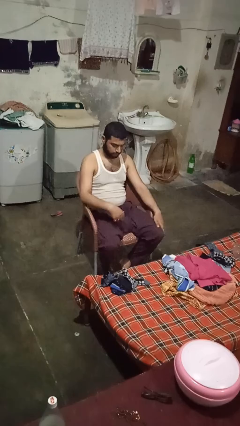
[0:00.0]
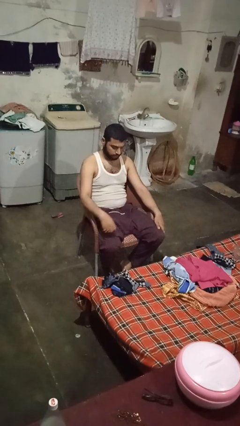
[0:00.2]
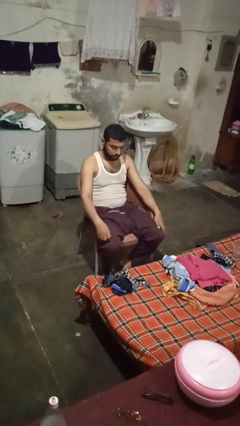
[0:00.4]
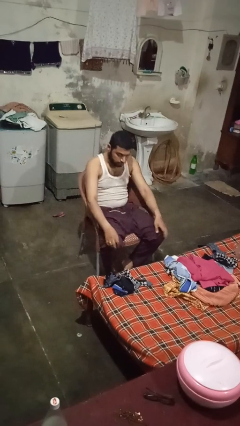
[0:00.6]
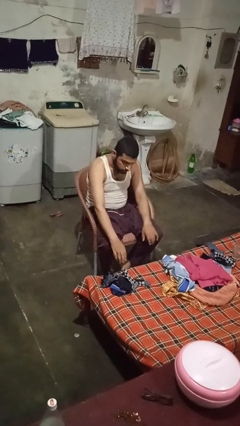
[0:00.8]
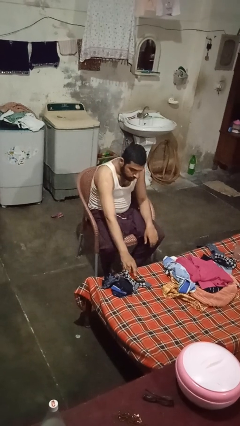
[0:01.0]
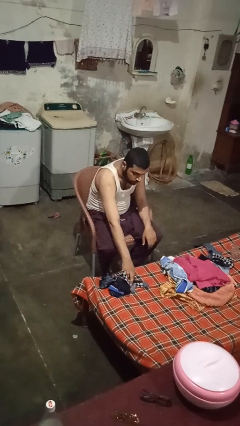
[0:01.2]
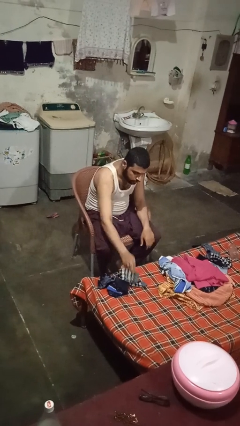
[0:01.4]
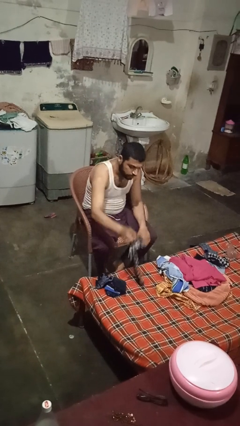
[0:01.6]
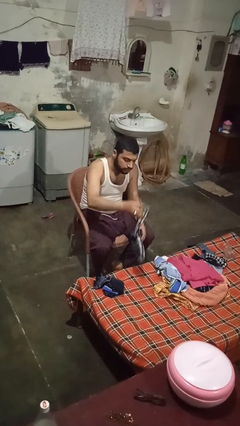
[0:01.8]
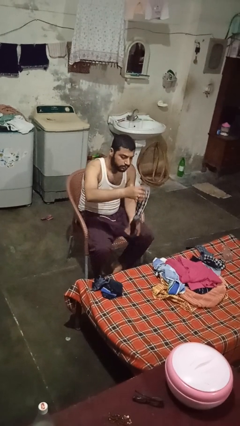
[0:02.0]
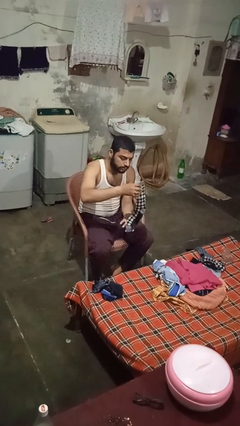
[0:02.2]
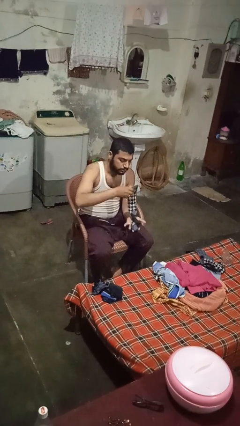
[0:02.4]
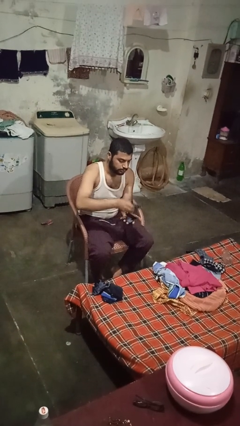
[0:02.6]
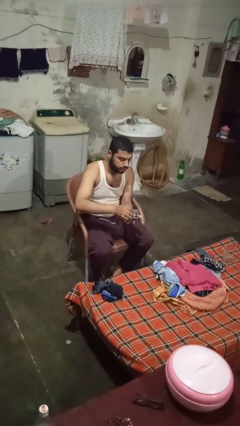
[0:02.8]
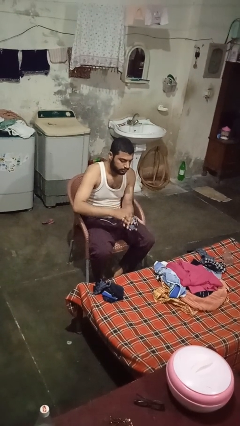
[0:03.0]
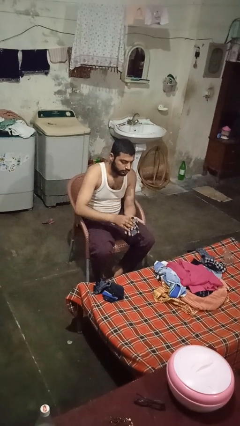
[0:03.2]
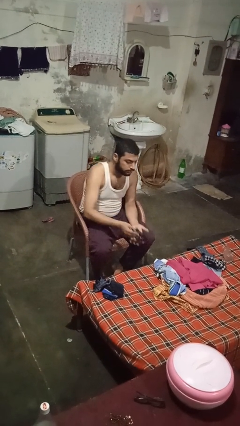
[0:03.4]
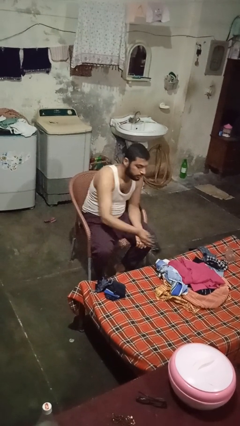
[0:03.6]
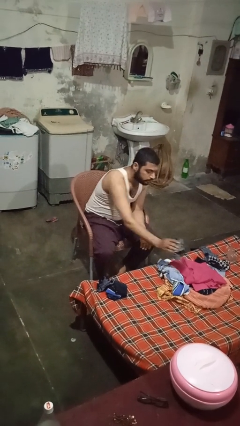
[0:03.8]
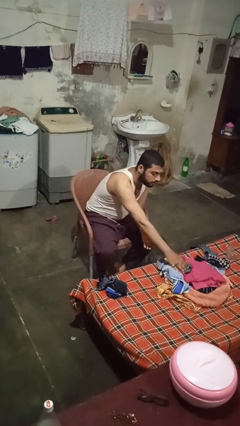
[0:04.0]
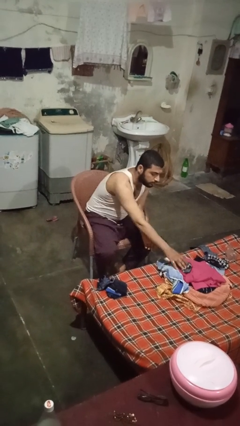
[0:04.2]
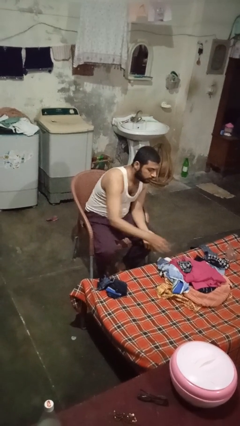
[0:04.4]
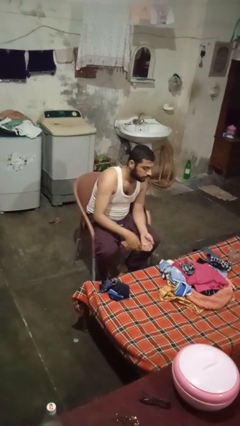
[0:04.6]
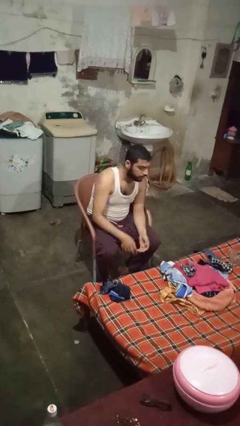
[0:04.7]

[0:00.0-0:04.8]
person folds socks

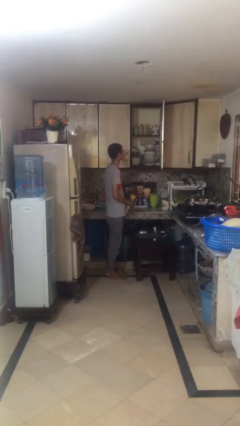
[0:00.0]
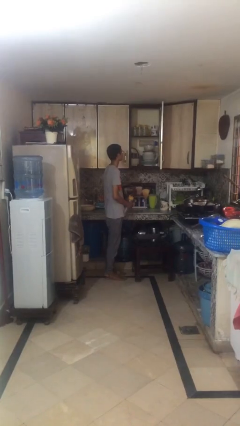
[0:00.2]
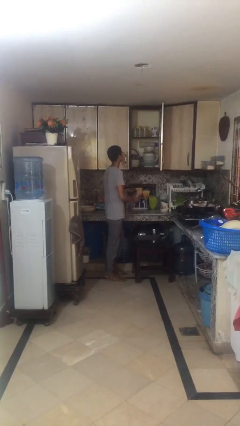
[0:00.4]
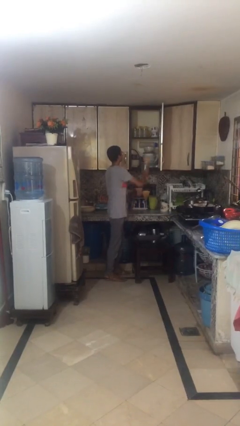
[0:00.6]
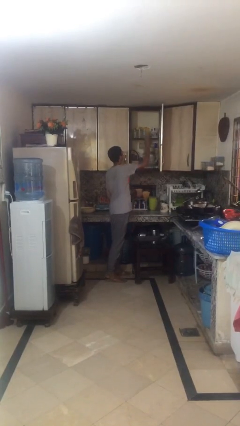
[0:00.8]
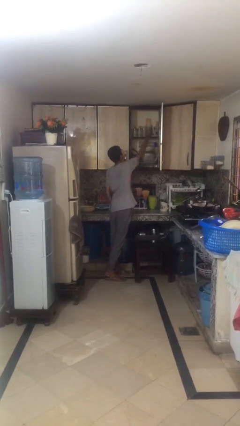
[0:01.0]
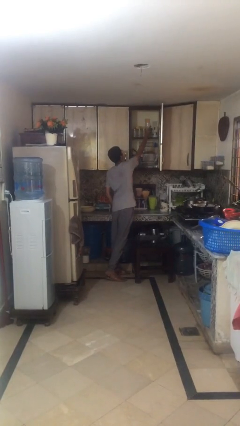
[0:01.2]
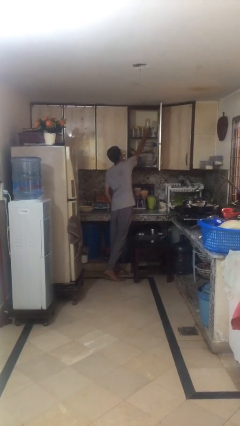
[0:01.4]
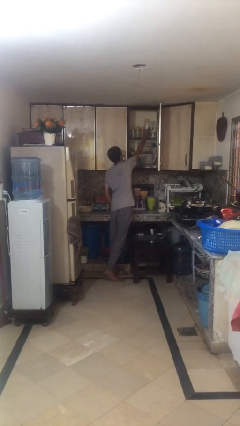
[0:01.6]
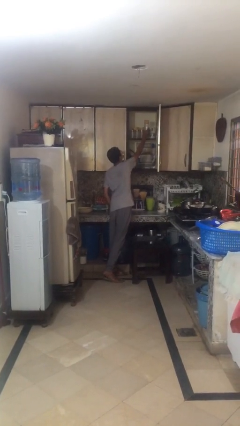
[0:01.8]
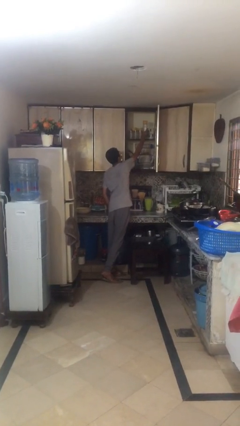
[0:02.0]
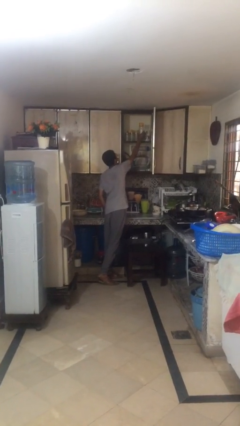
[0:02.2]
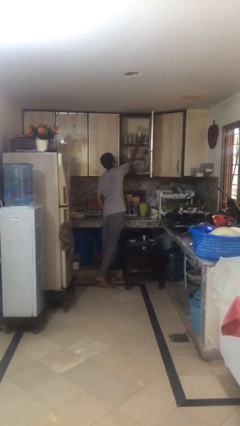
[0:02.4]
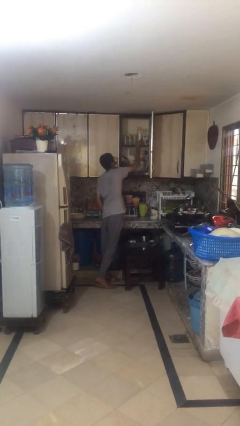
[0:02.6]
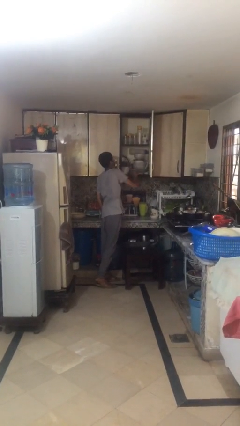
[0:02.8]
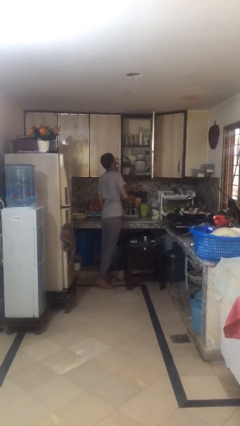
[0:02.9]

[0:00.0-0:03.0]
person puts down object on shelf

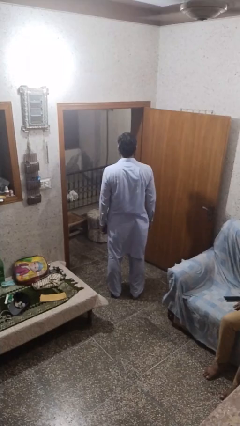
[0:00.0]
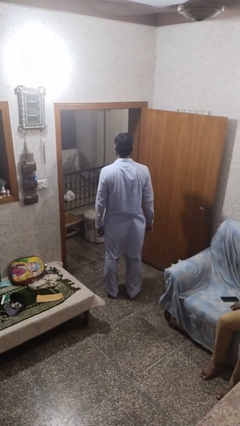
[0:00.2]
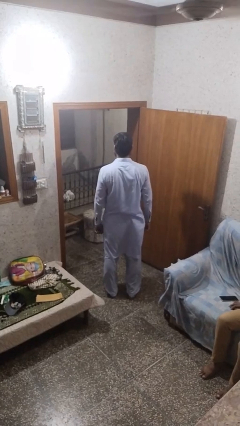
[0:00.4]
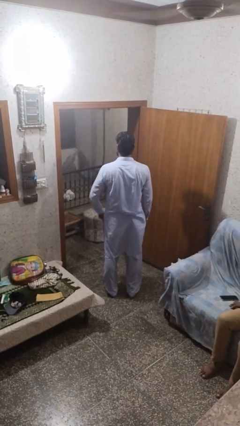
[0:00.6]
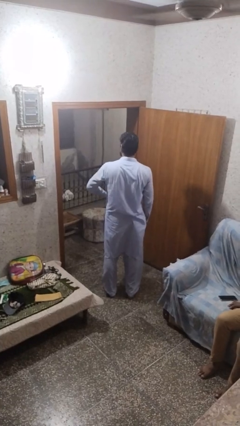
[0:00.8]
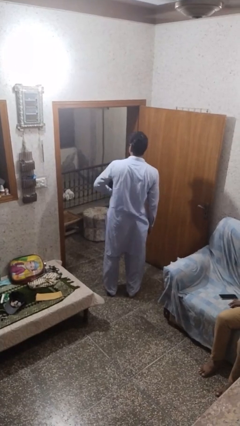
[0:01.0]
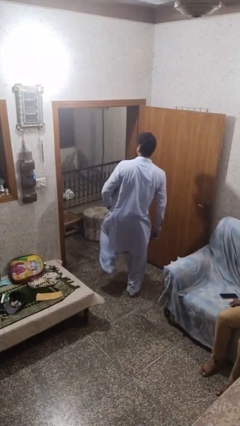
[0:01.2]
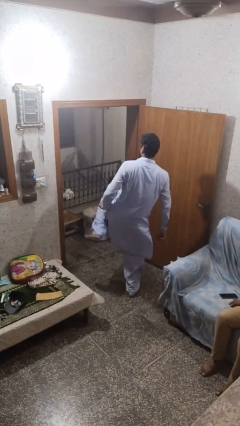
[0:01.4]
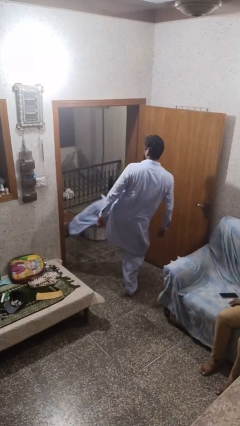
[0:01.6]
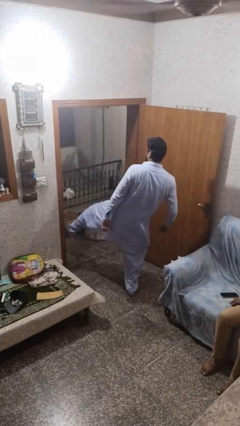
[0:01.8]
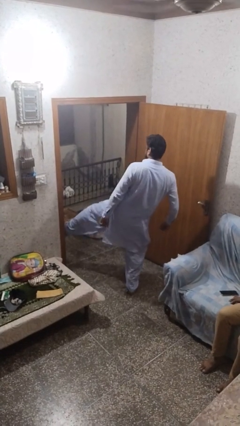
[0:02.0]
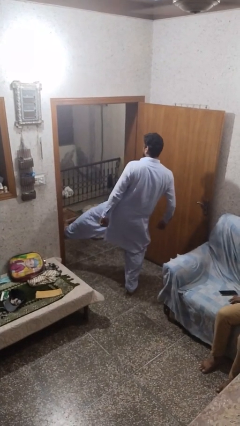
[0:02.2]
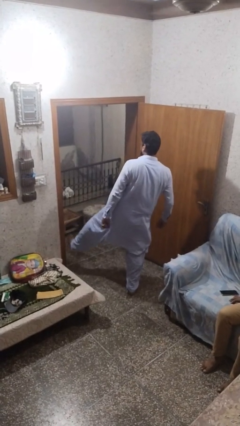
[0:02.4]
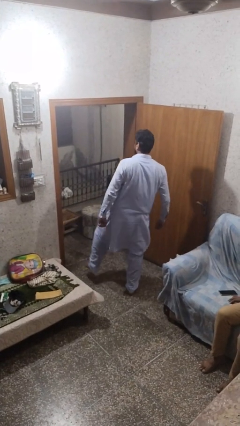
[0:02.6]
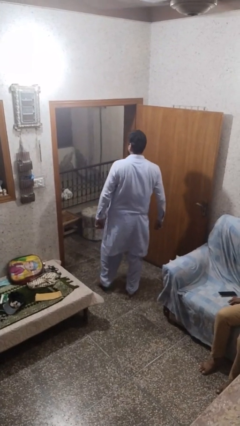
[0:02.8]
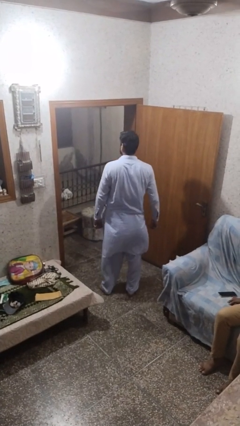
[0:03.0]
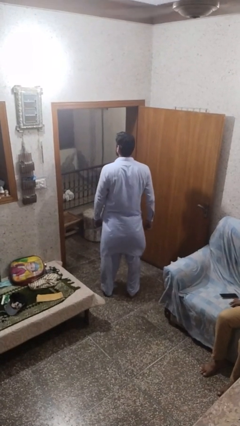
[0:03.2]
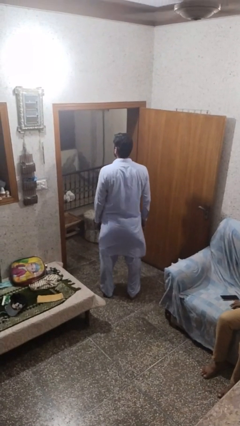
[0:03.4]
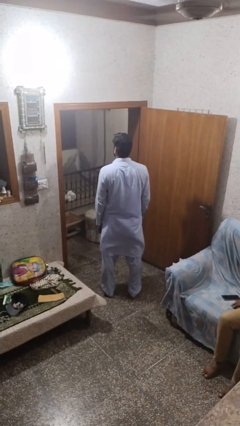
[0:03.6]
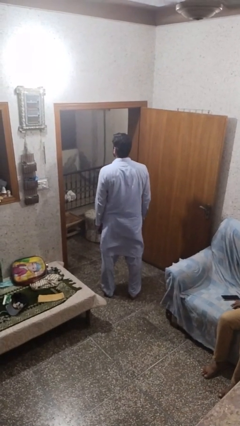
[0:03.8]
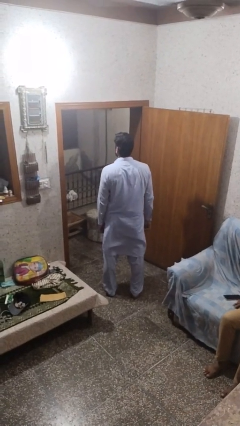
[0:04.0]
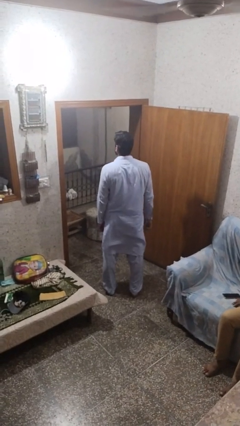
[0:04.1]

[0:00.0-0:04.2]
person karate kicks

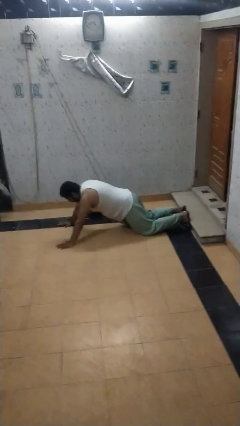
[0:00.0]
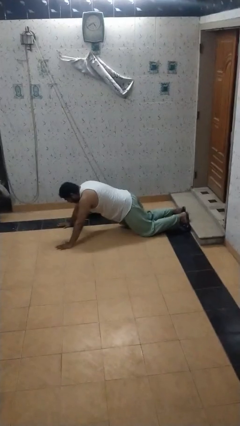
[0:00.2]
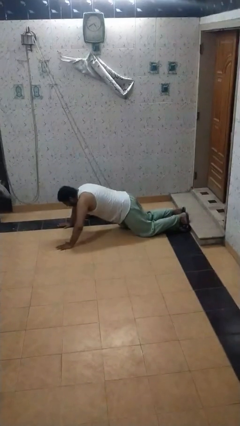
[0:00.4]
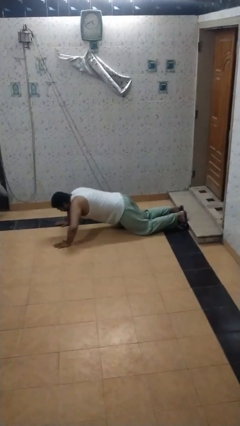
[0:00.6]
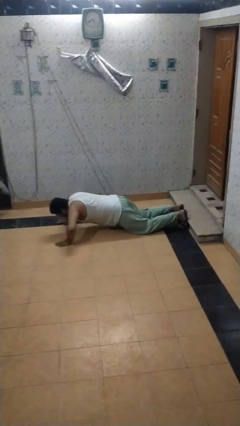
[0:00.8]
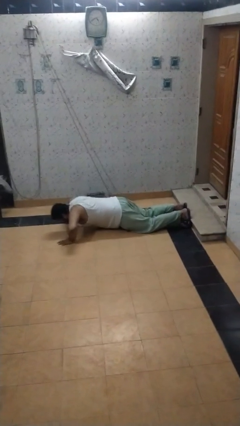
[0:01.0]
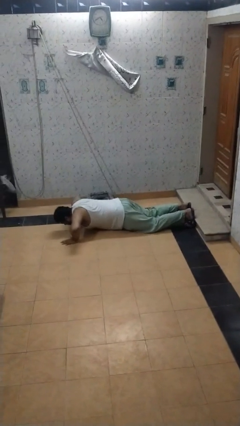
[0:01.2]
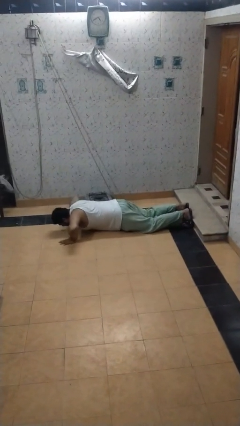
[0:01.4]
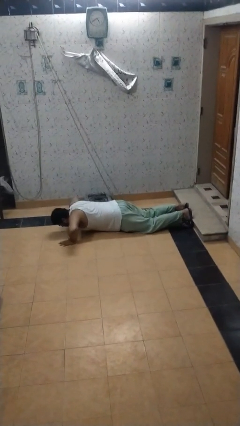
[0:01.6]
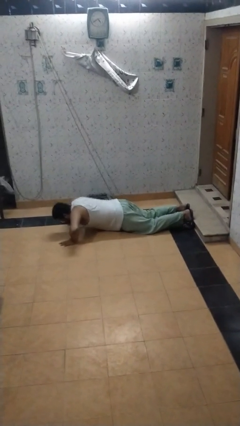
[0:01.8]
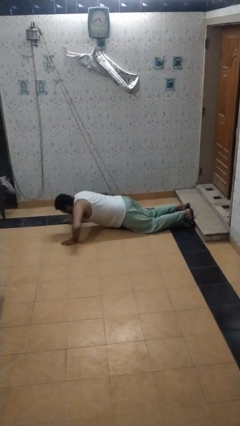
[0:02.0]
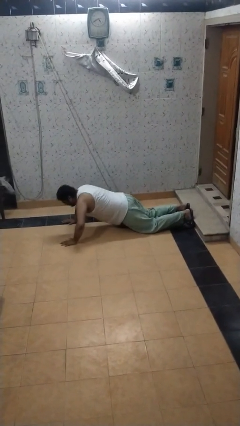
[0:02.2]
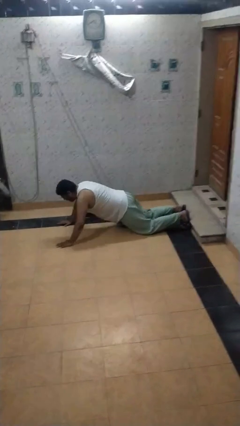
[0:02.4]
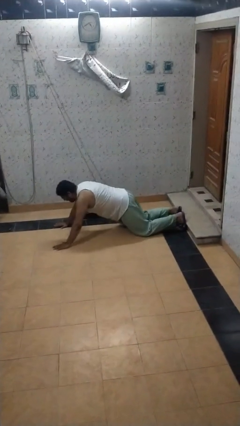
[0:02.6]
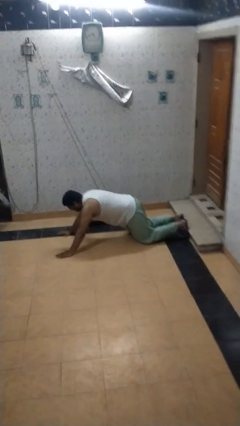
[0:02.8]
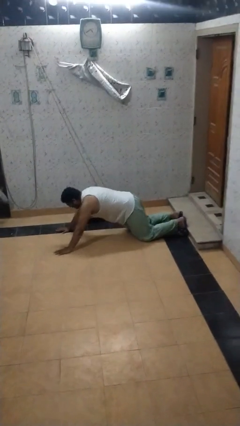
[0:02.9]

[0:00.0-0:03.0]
person exercises with pushup

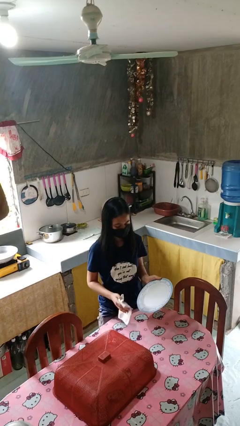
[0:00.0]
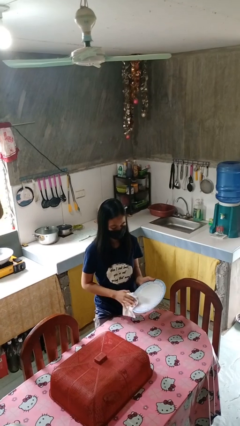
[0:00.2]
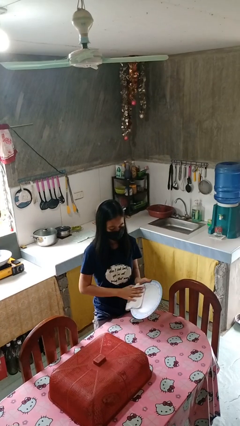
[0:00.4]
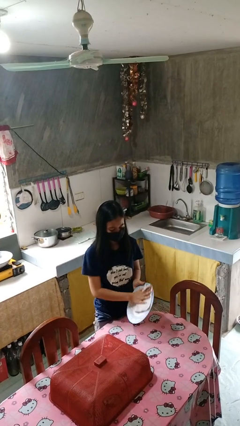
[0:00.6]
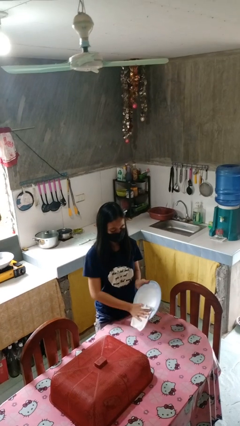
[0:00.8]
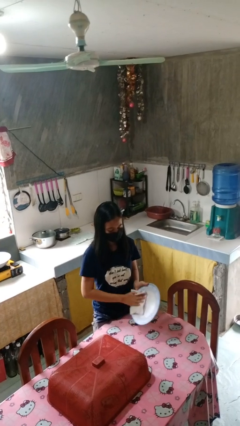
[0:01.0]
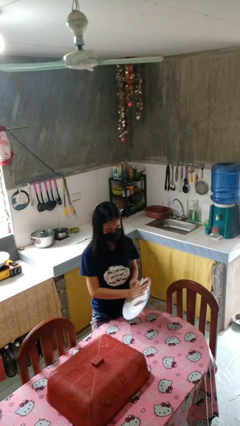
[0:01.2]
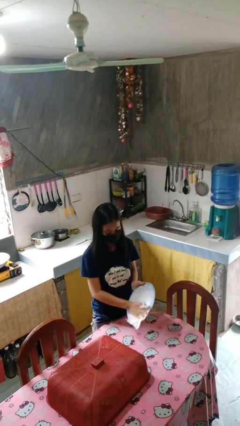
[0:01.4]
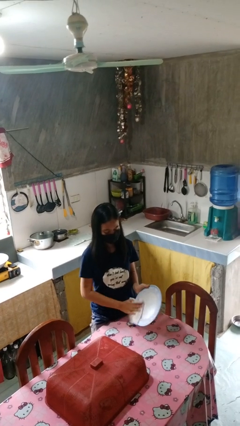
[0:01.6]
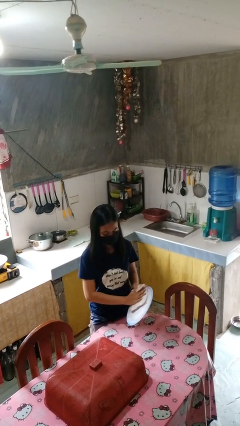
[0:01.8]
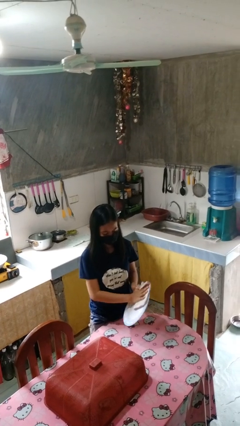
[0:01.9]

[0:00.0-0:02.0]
person dries dish

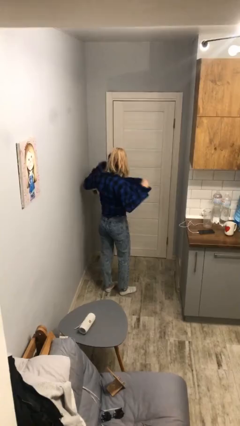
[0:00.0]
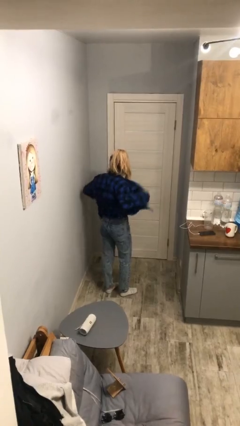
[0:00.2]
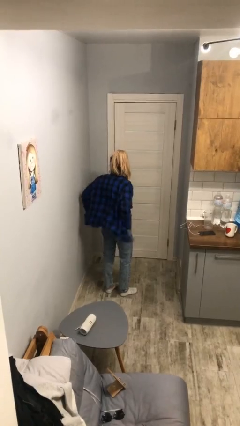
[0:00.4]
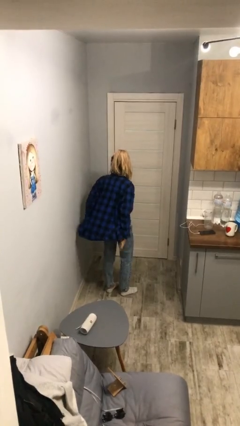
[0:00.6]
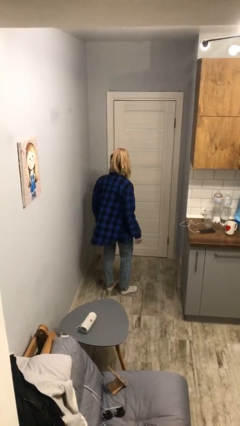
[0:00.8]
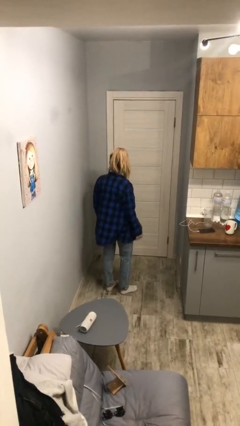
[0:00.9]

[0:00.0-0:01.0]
person untucks shirt
